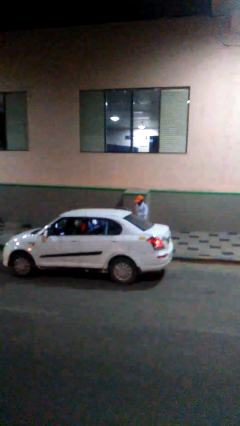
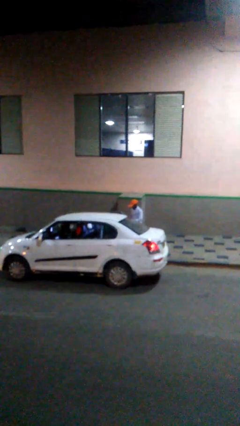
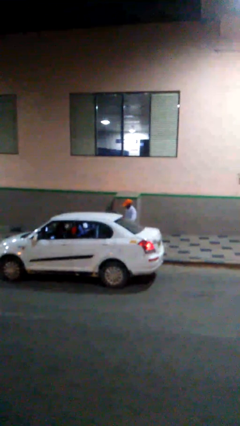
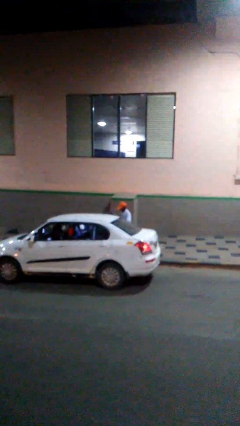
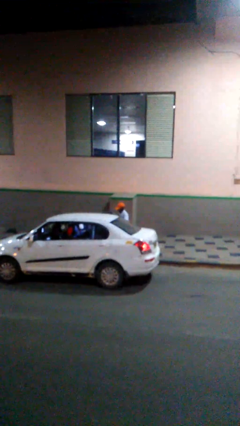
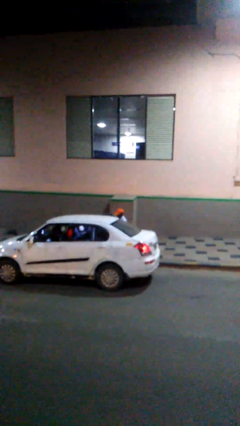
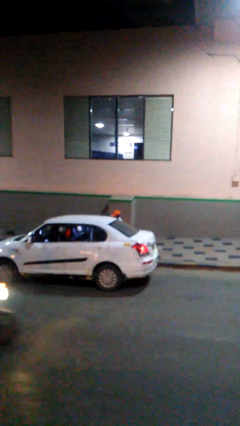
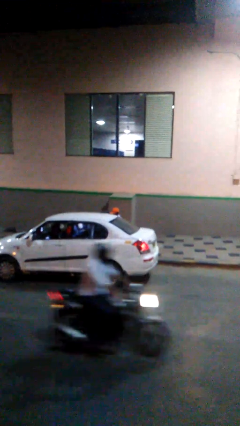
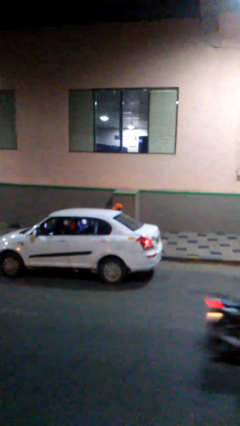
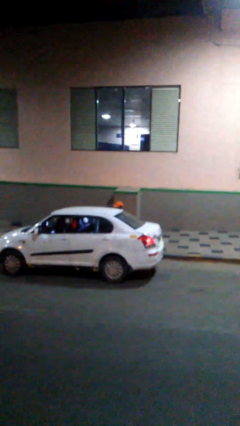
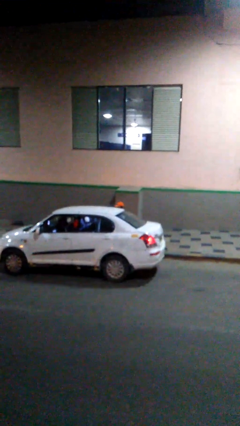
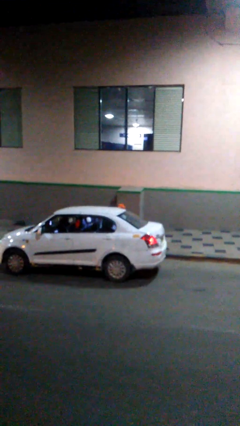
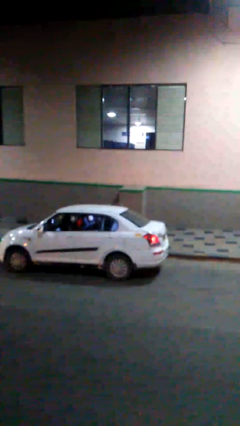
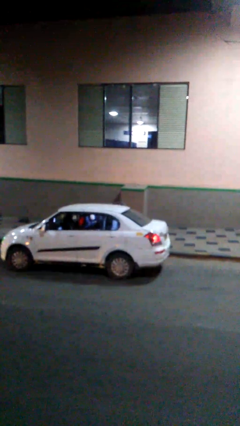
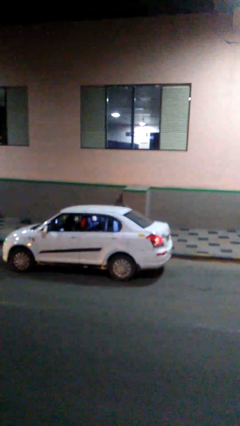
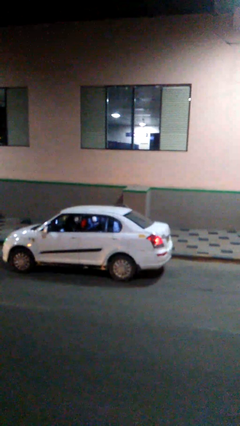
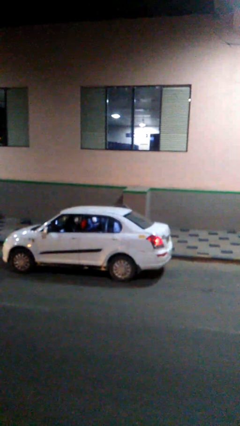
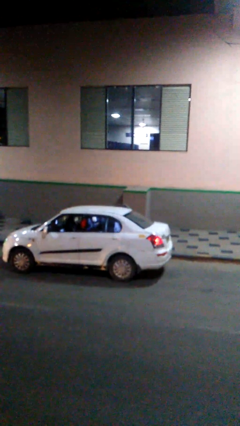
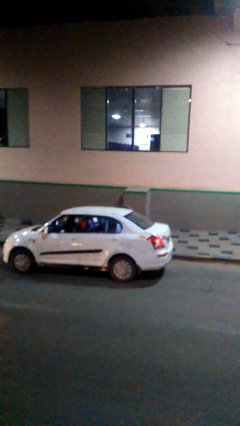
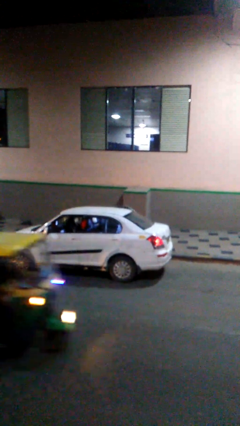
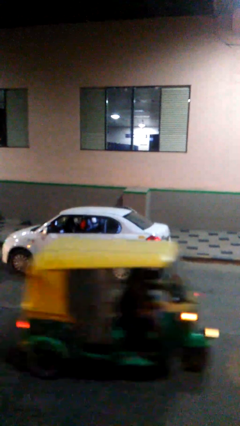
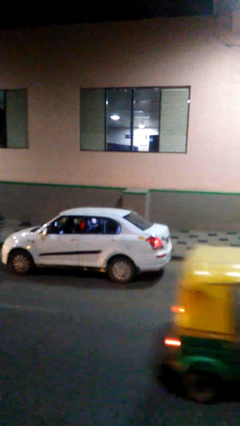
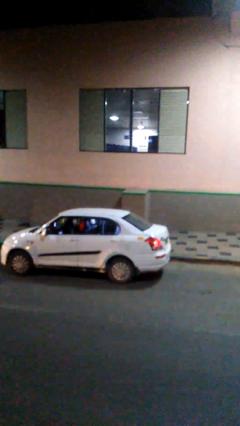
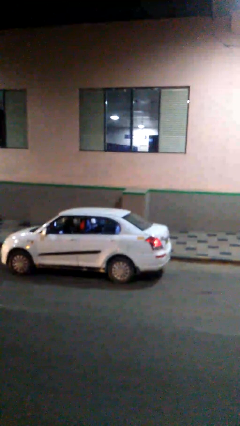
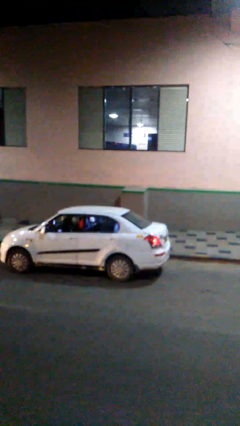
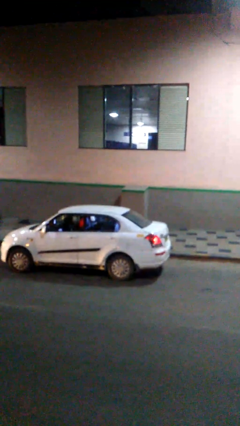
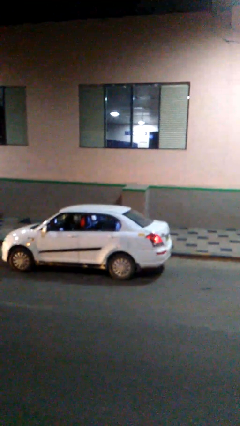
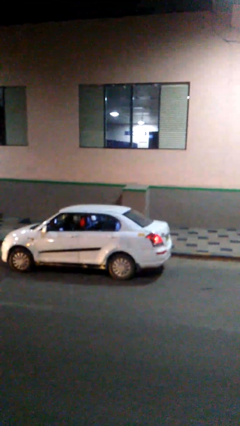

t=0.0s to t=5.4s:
person enters car

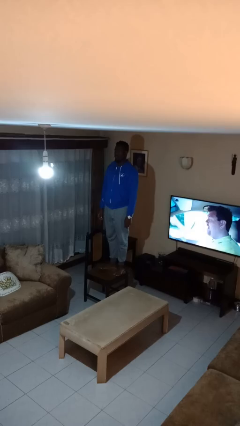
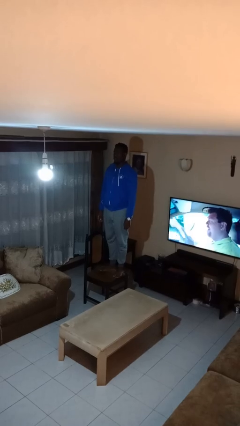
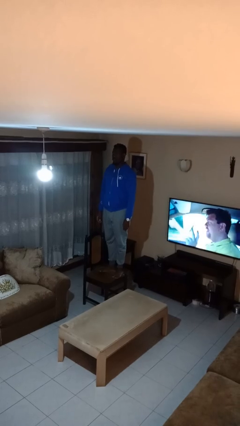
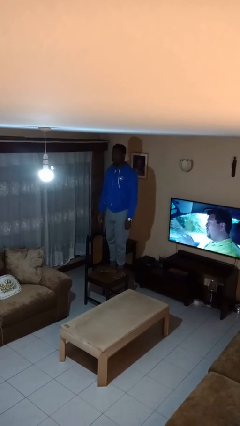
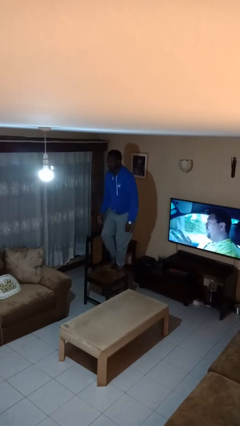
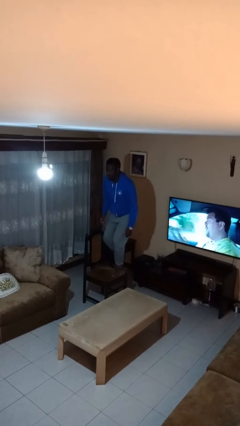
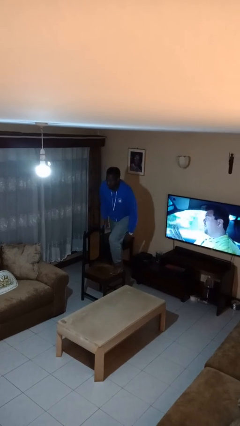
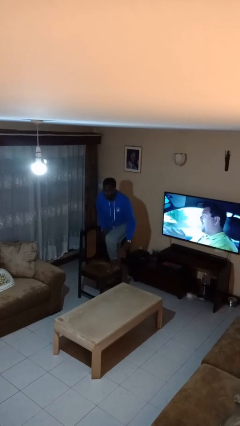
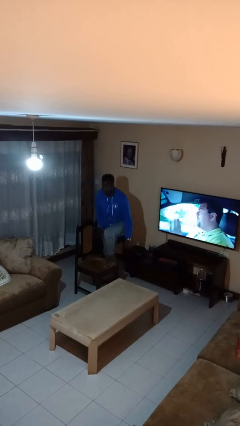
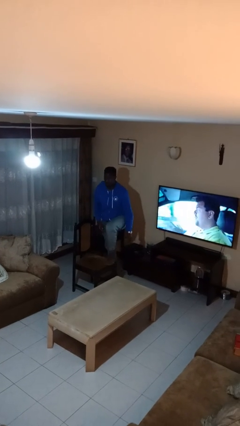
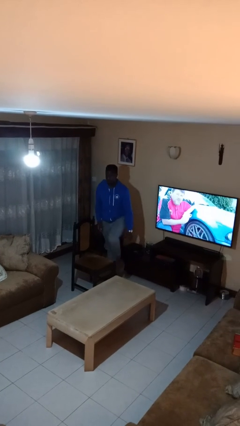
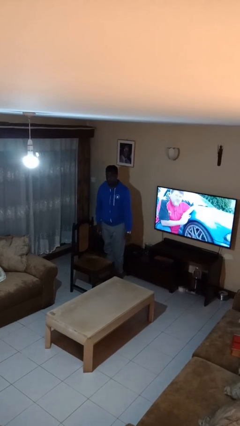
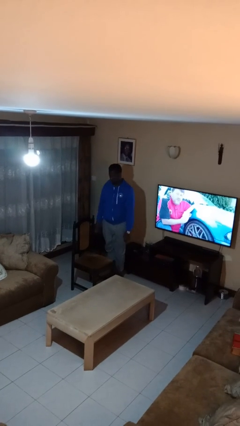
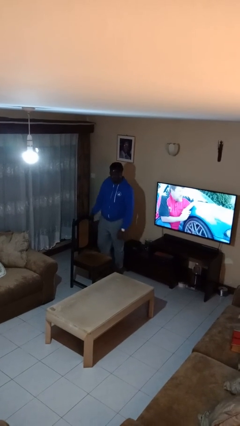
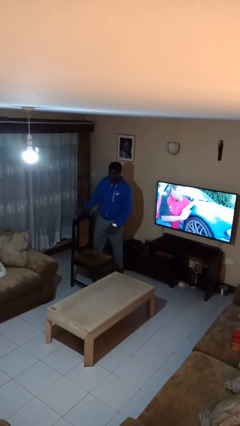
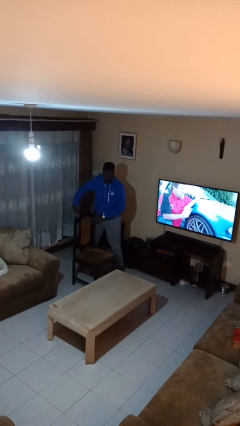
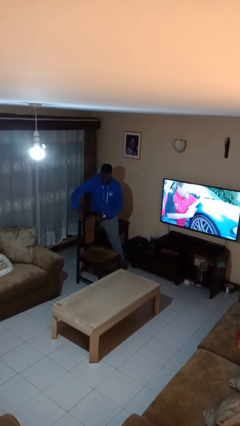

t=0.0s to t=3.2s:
person climbs off chair

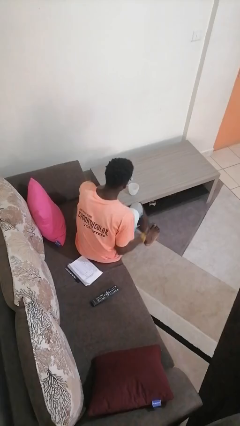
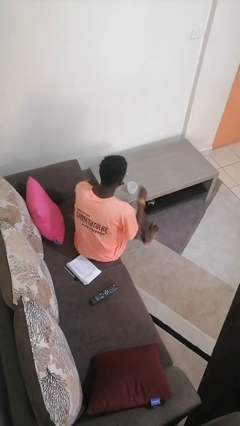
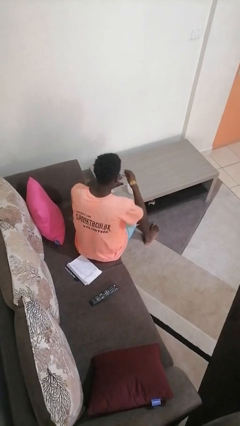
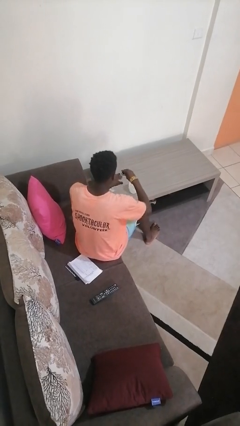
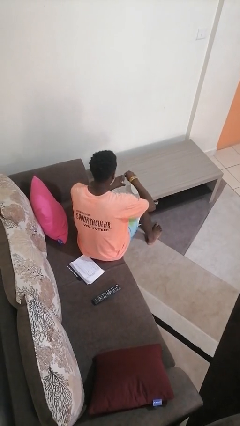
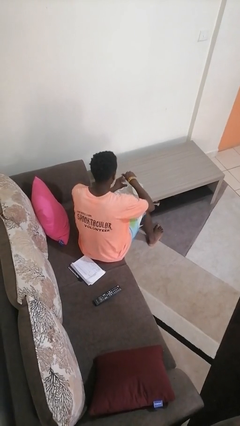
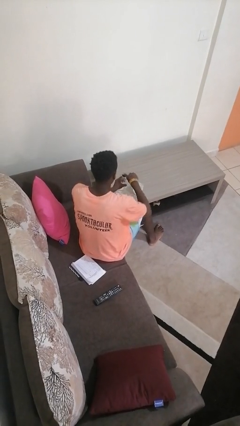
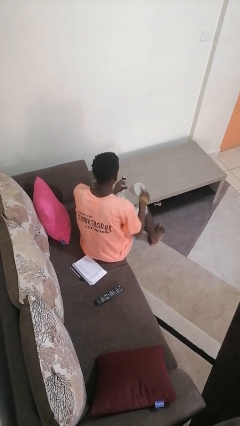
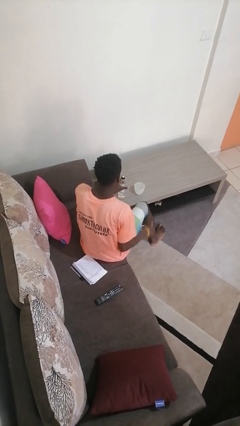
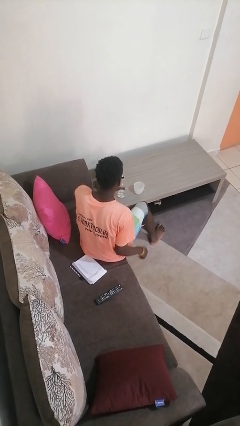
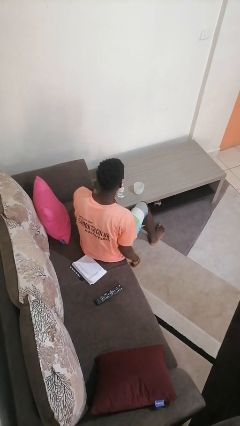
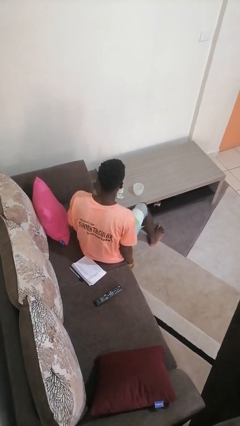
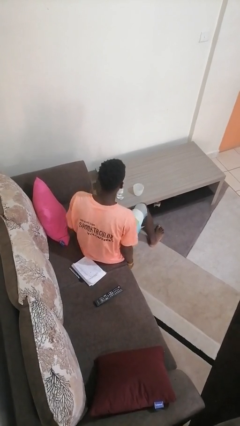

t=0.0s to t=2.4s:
person screws lid to bottle

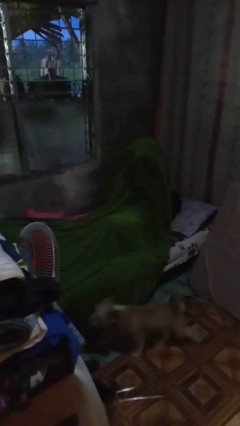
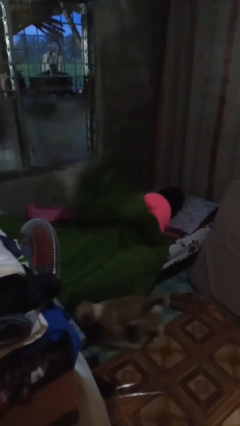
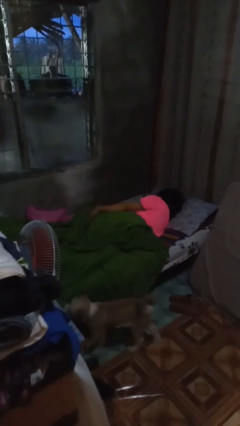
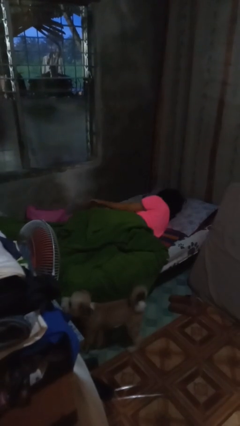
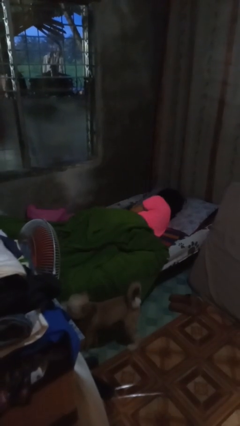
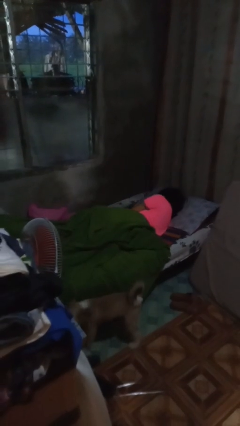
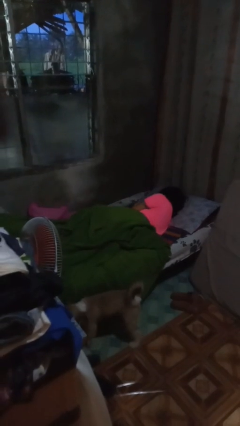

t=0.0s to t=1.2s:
person uncovers with bedsheets

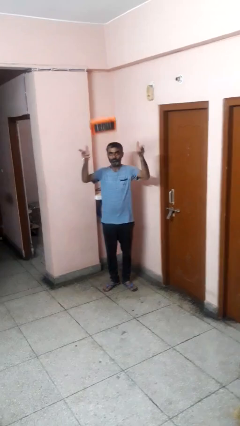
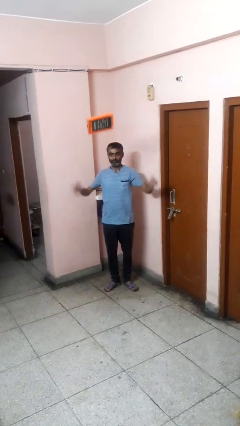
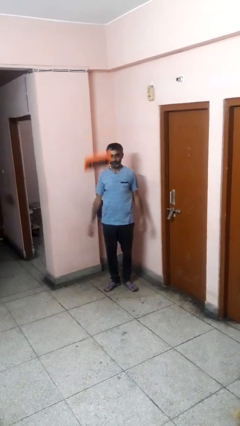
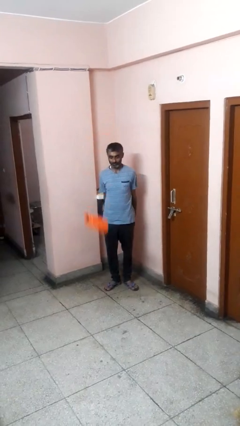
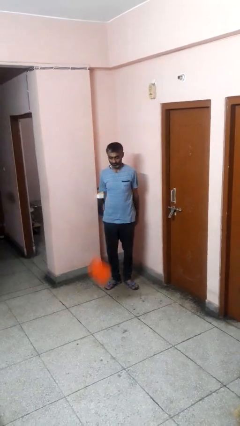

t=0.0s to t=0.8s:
person throws object into air

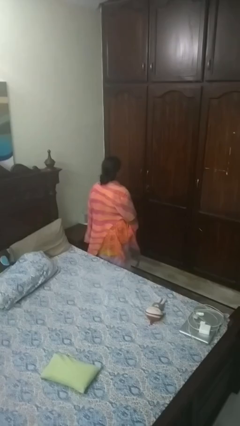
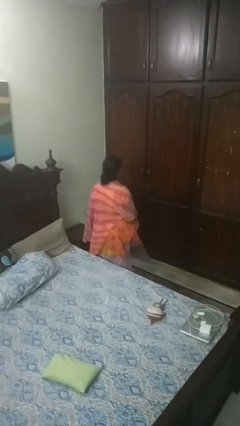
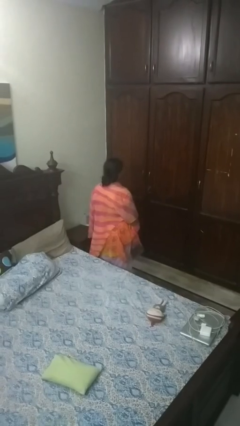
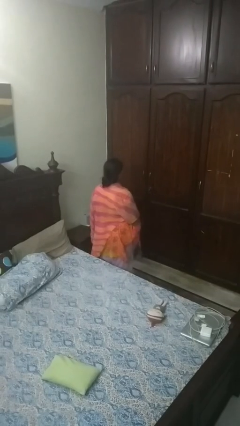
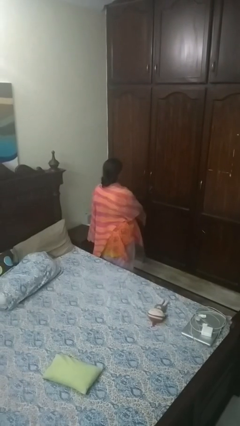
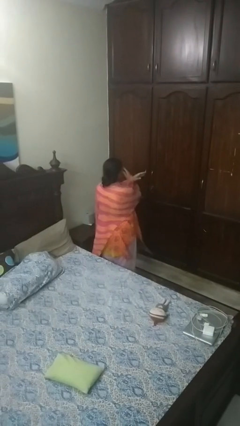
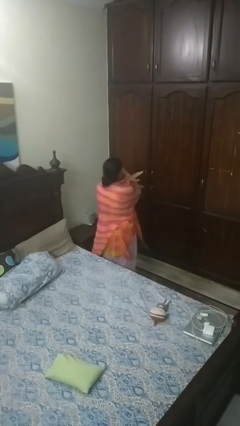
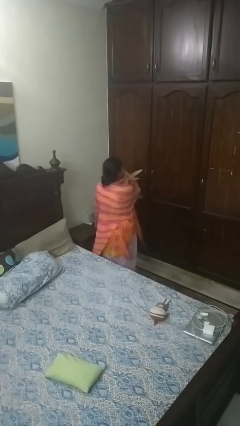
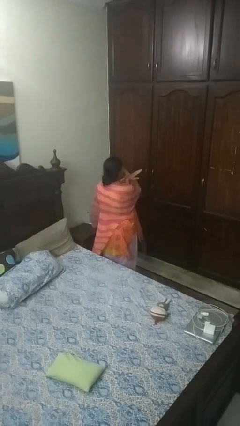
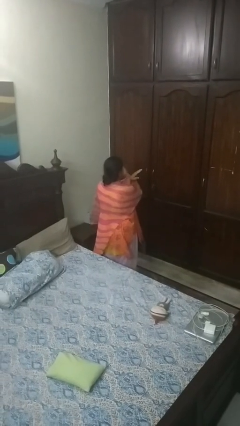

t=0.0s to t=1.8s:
person gestures arms x

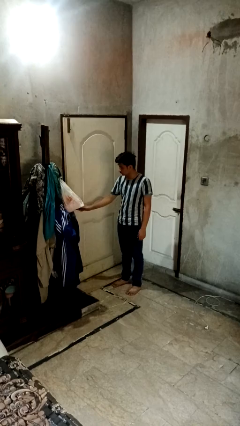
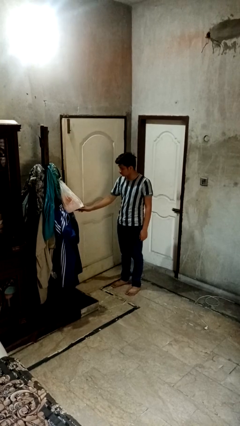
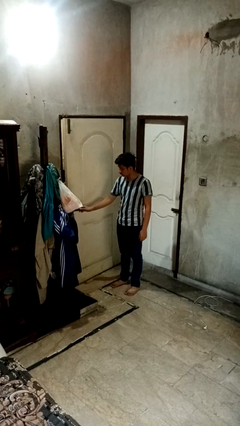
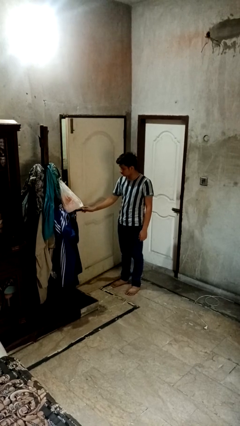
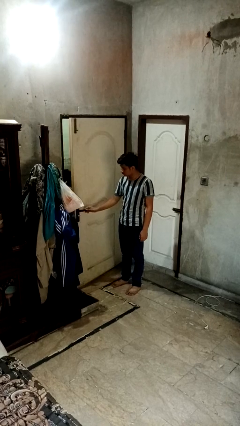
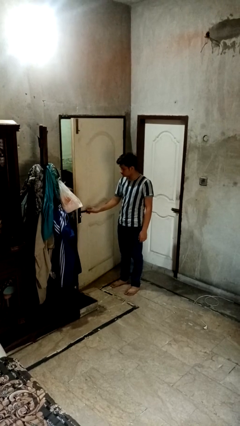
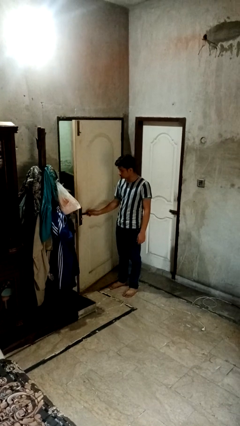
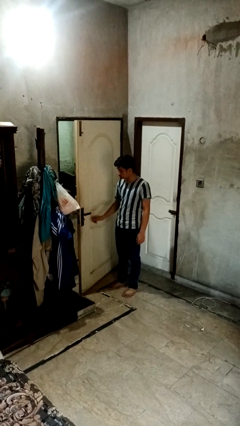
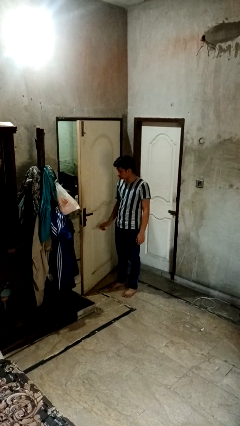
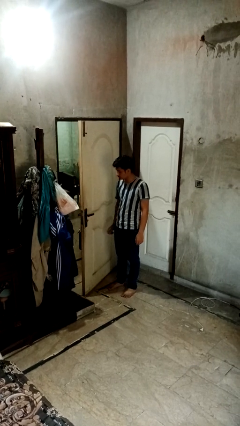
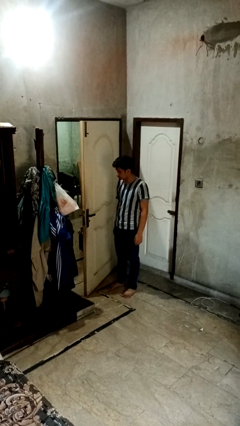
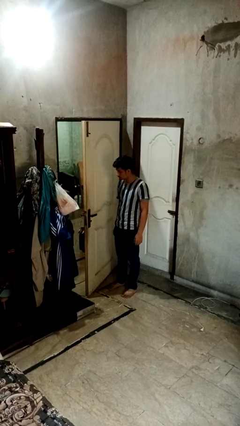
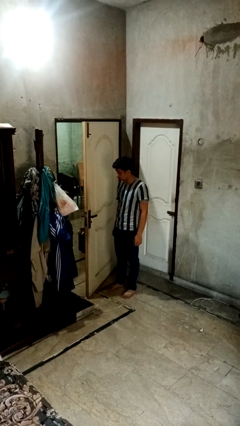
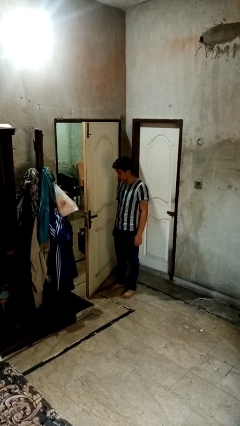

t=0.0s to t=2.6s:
person opens facility door
